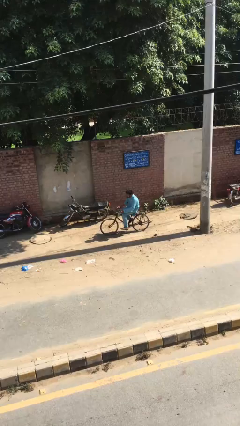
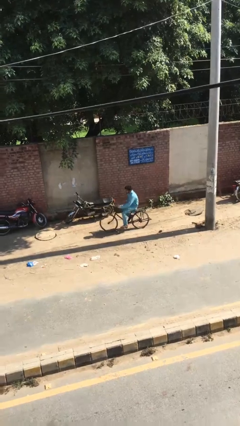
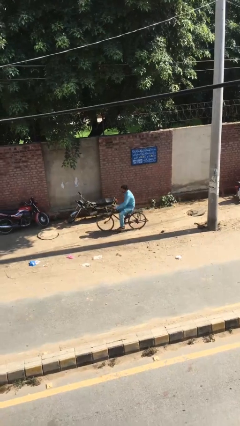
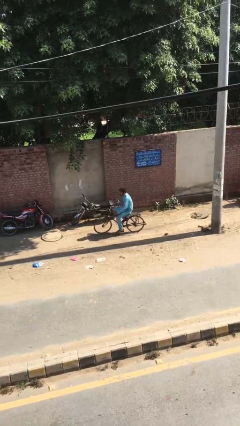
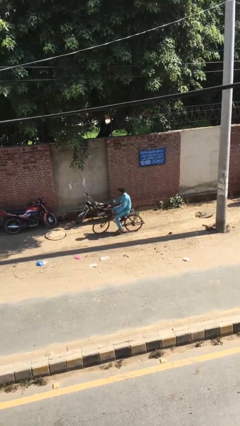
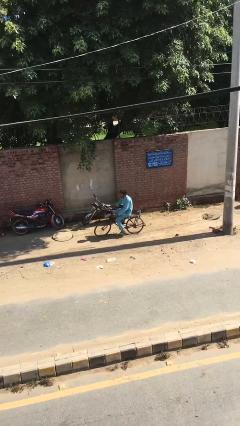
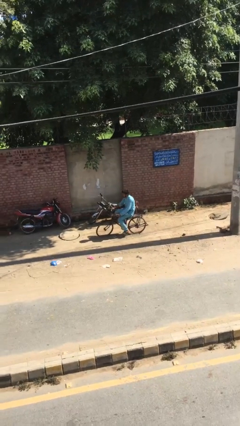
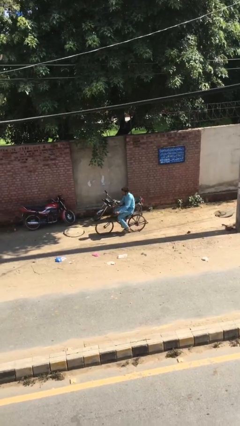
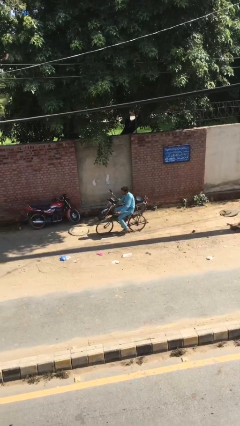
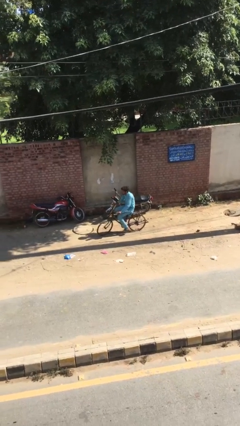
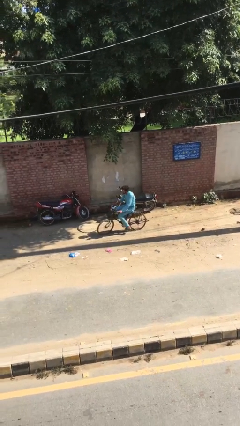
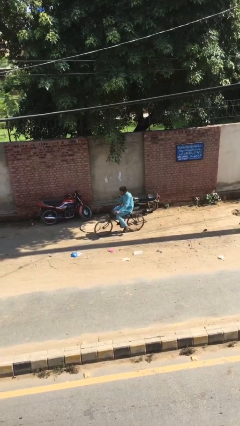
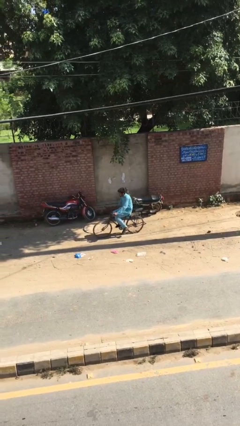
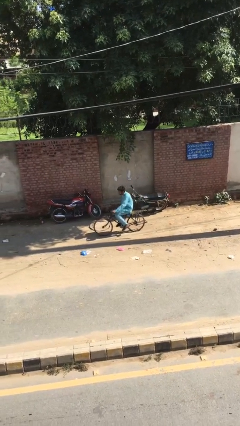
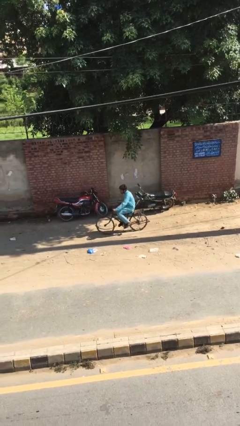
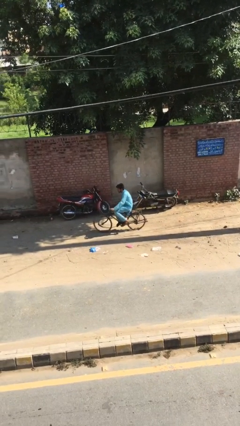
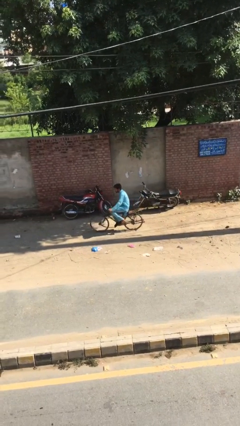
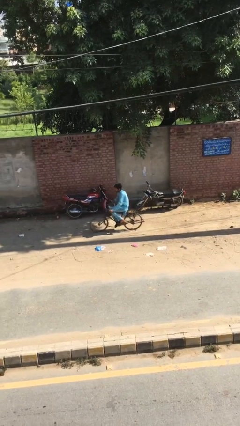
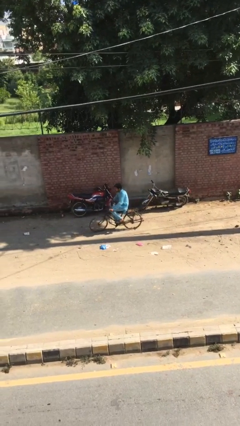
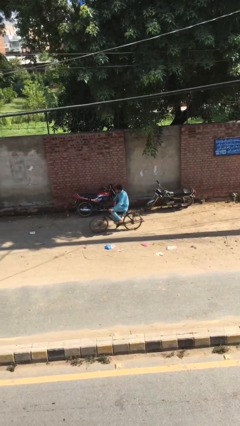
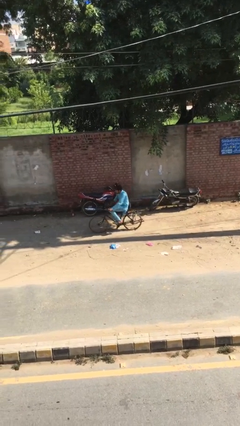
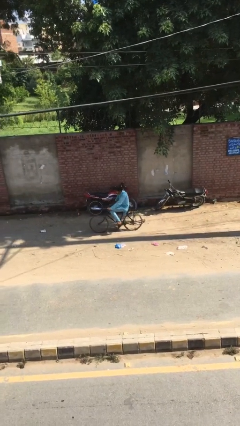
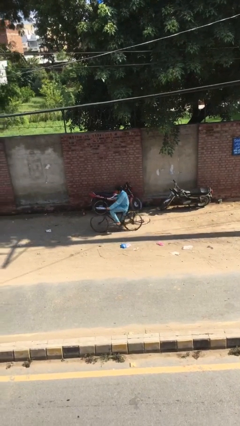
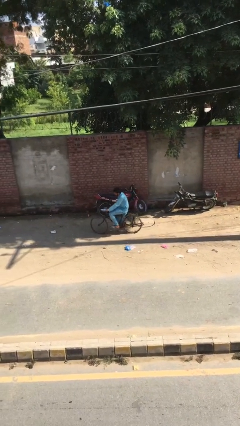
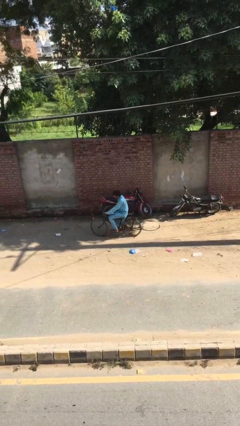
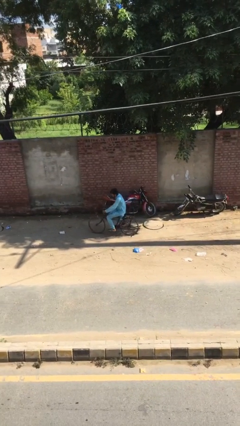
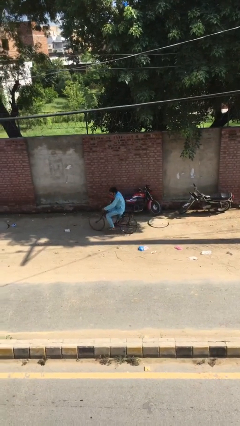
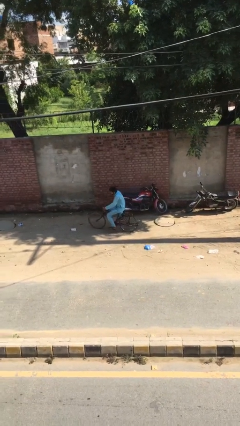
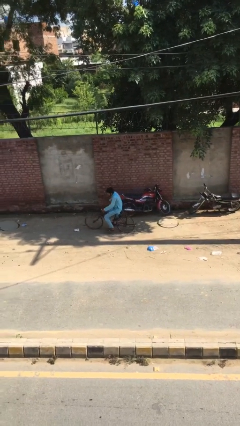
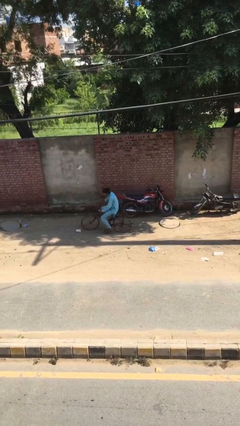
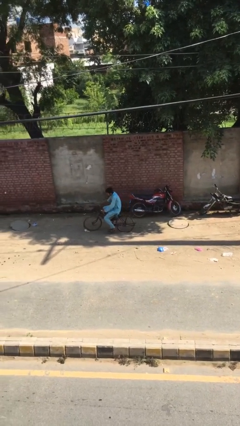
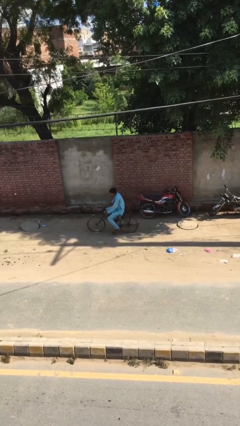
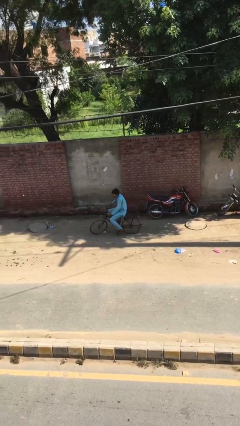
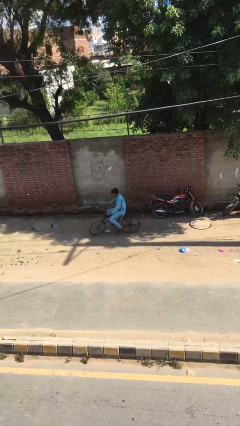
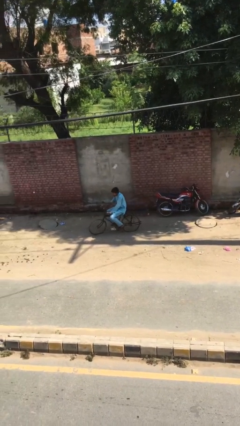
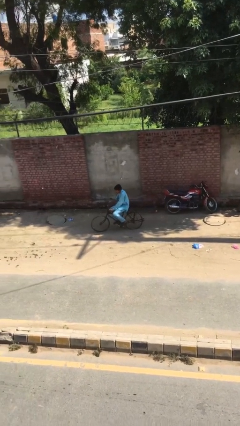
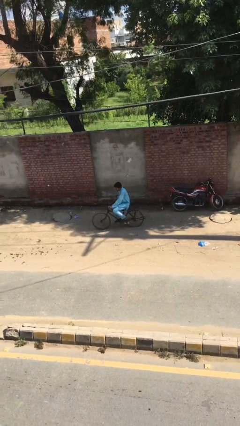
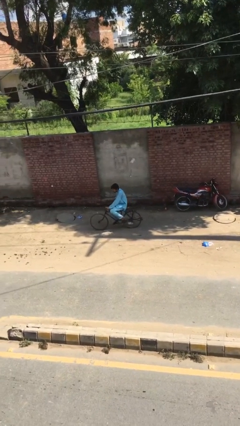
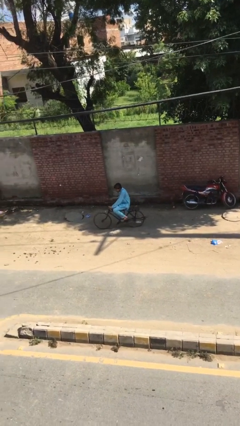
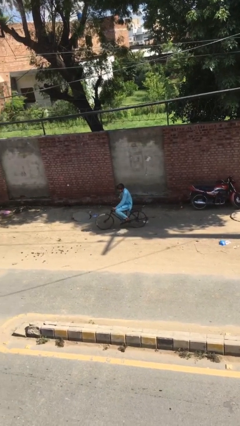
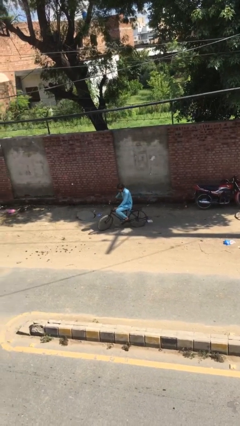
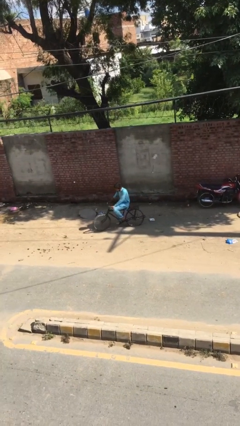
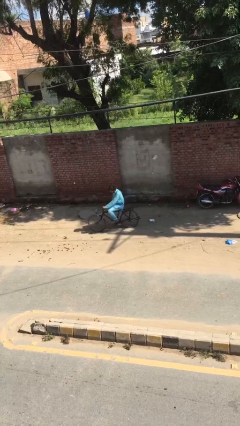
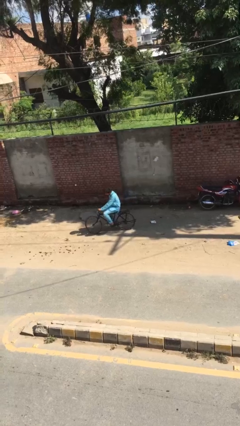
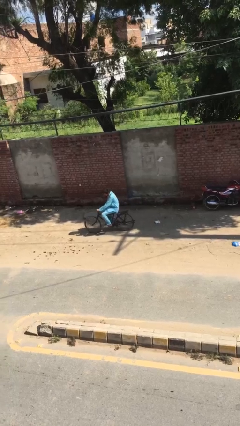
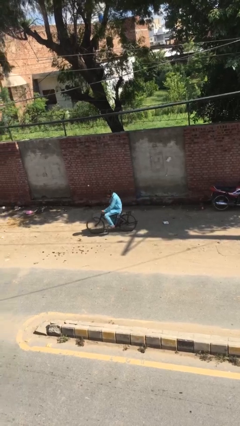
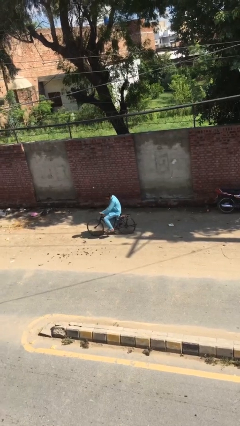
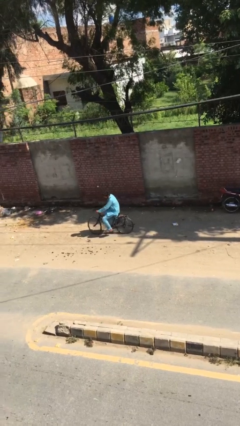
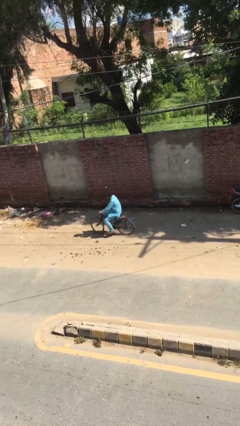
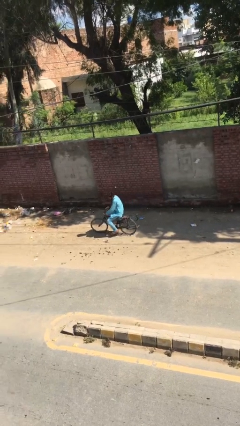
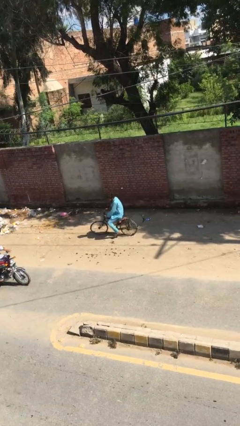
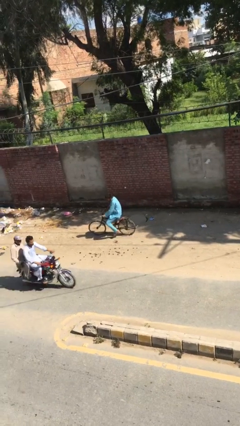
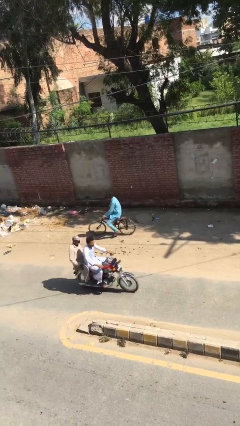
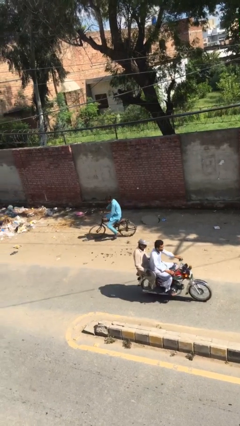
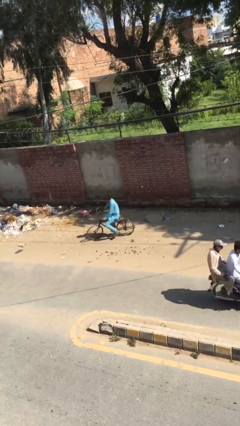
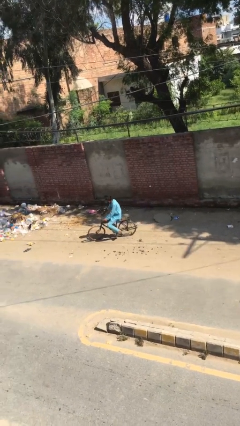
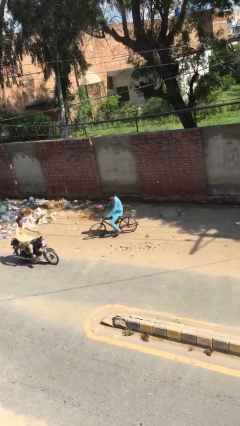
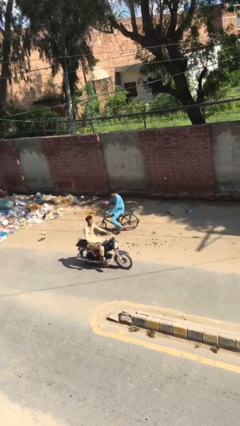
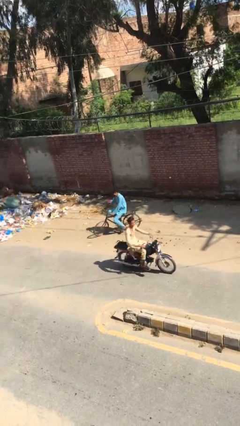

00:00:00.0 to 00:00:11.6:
person rides bicycle

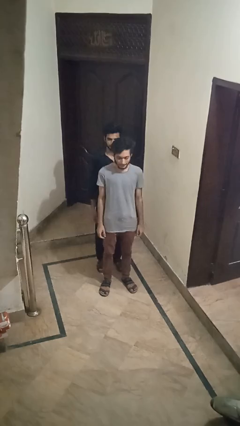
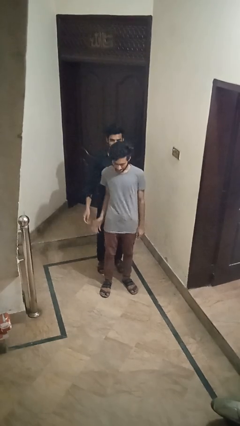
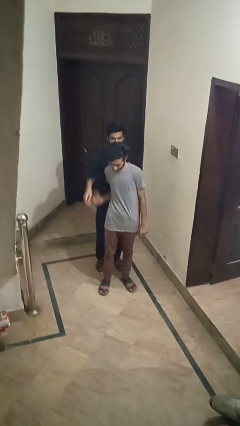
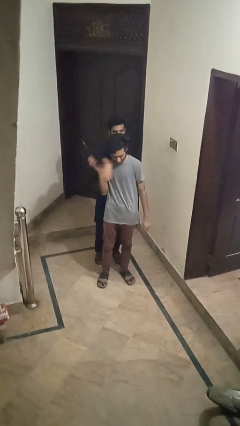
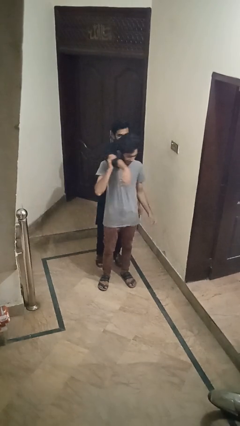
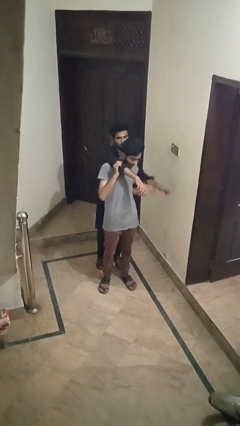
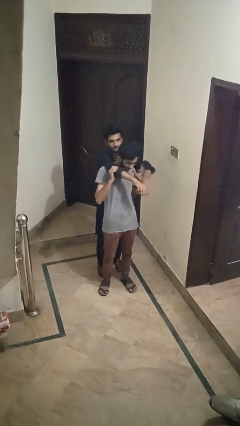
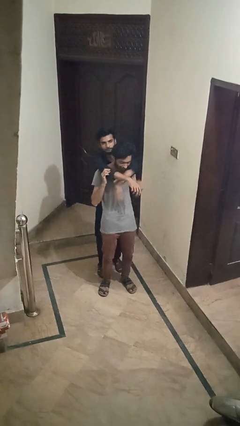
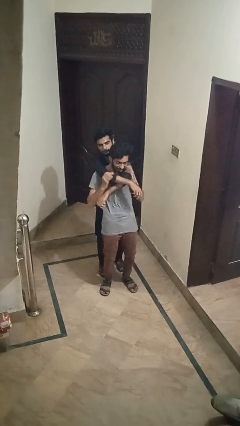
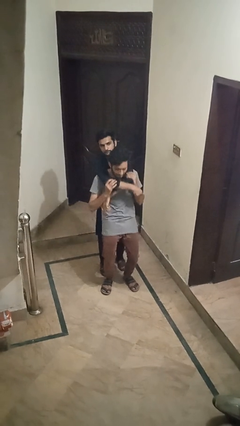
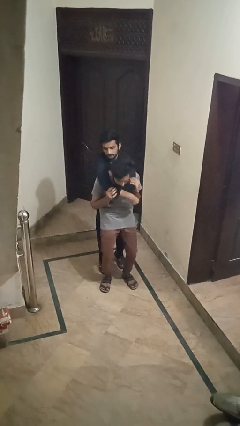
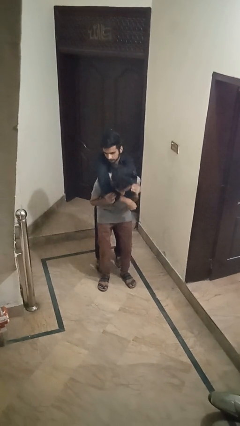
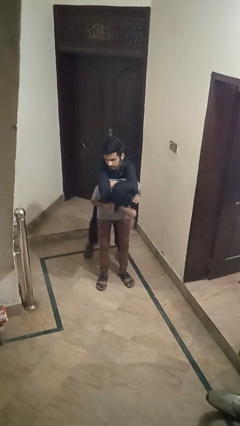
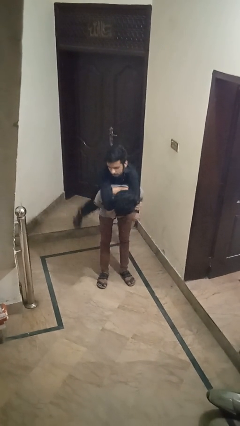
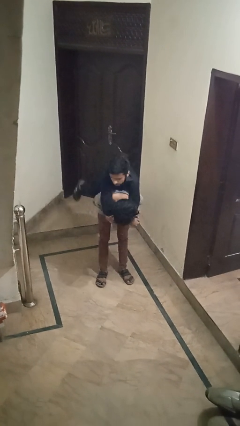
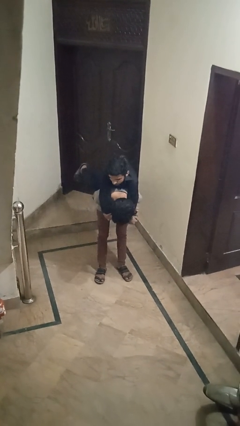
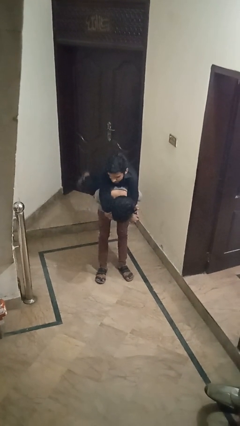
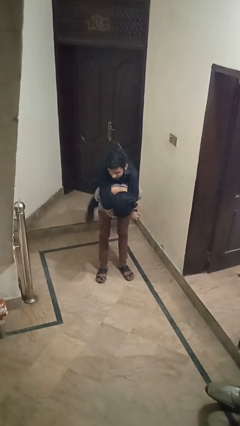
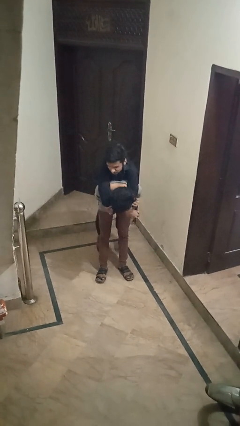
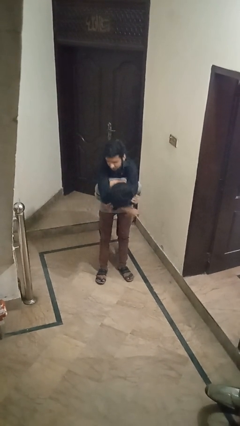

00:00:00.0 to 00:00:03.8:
person carries person over shoulder

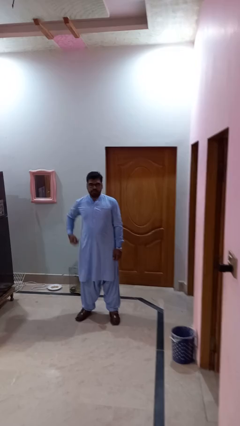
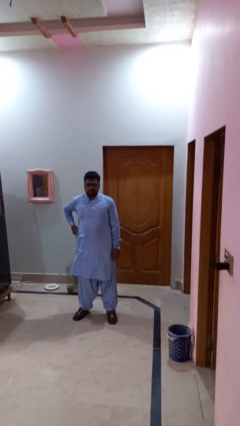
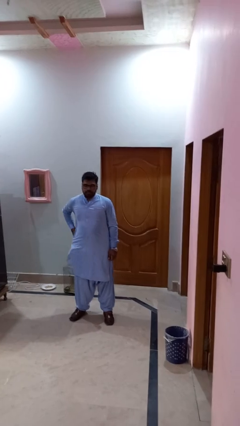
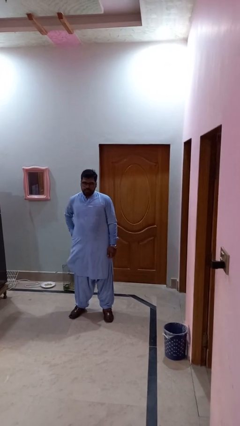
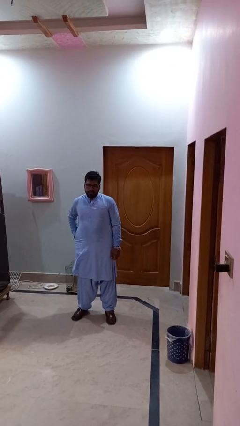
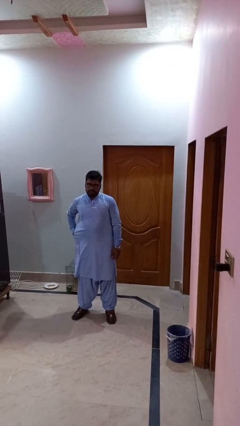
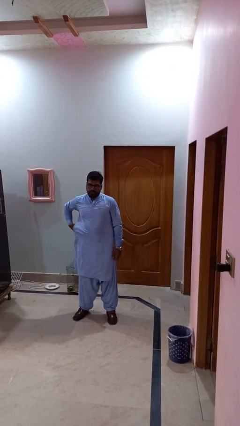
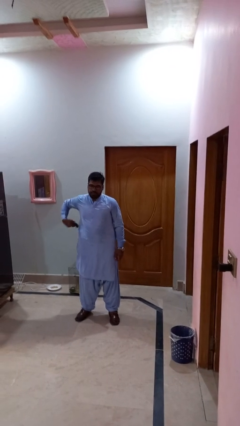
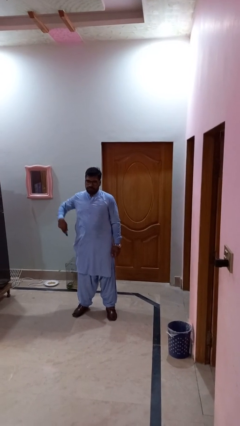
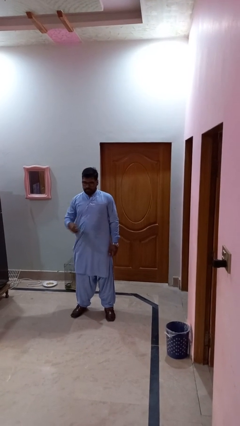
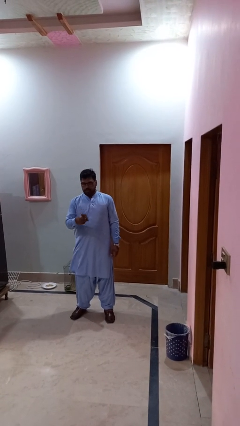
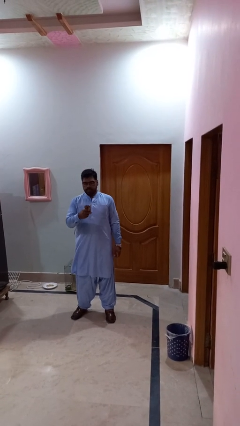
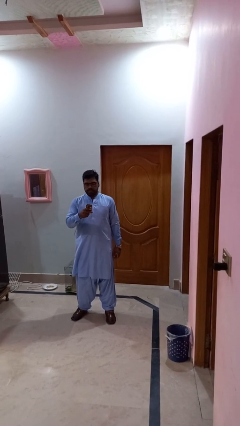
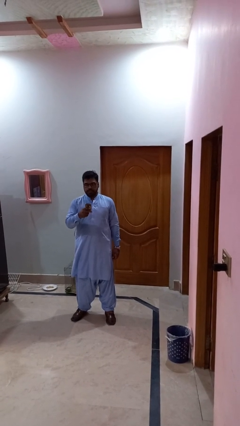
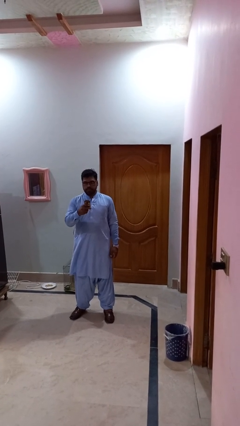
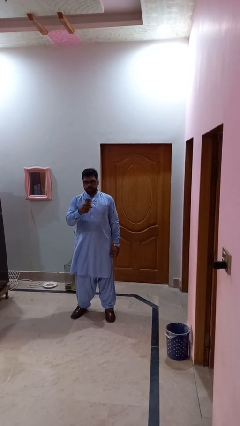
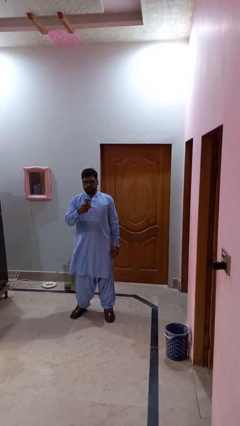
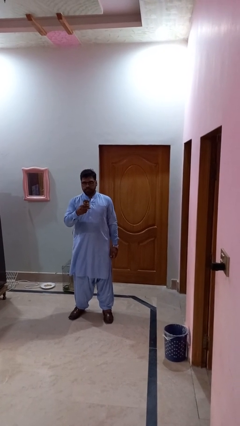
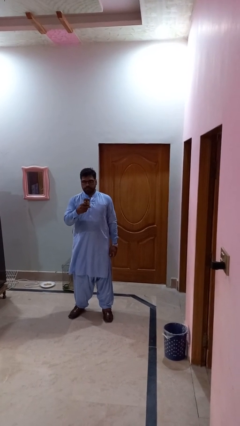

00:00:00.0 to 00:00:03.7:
person takes phone from pocket
